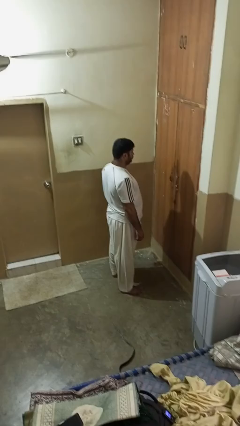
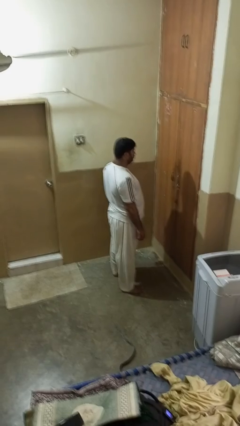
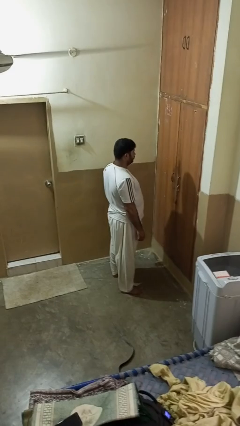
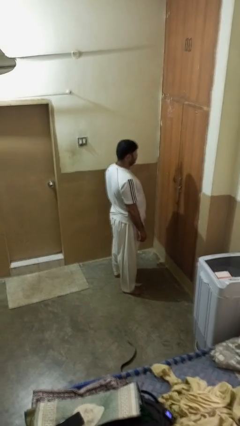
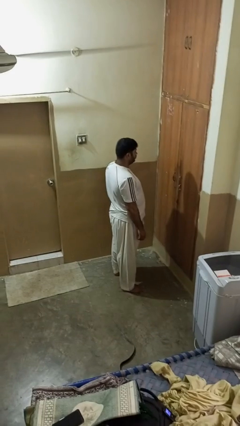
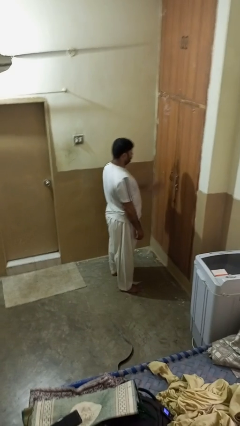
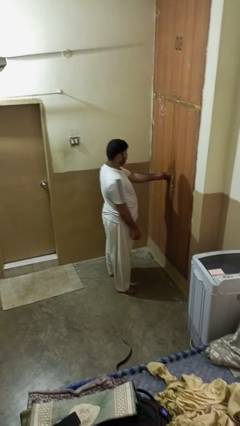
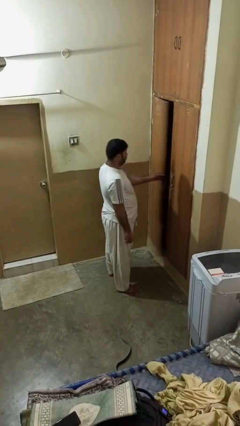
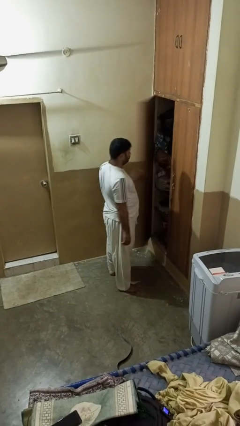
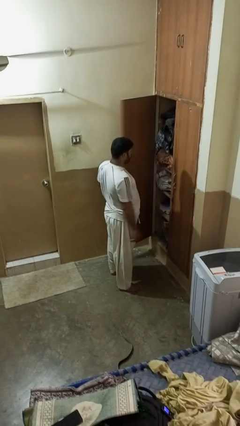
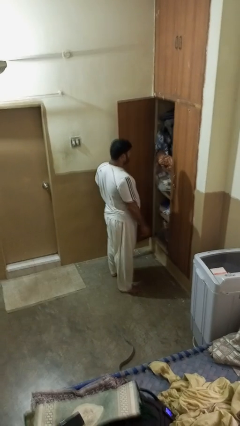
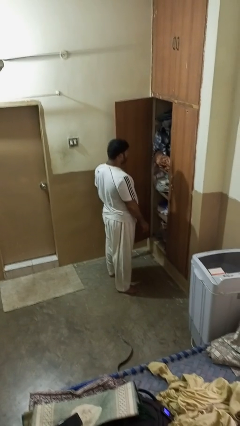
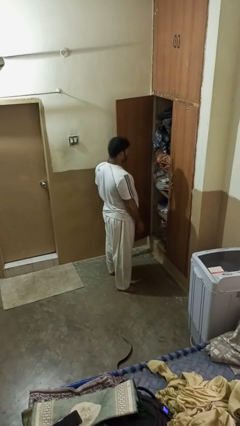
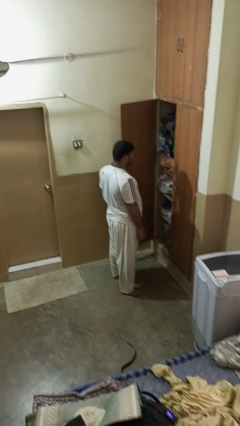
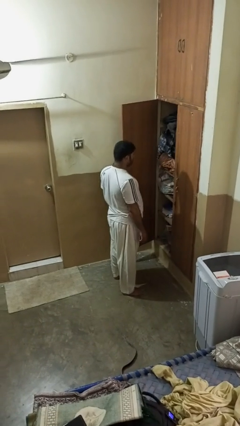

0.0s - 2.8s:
person opens closet door

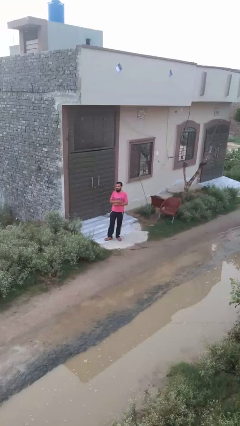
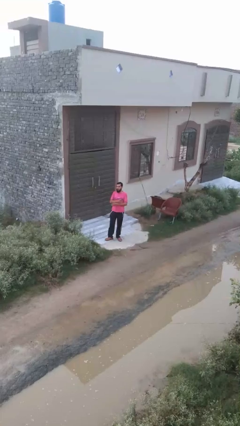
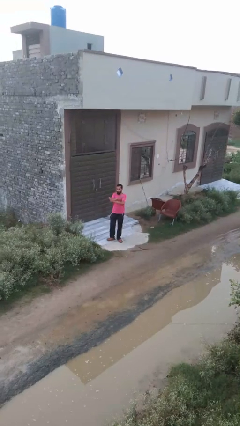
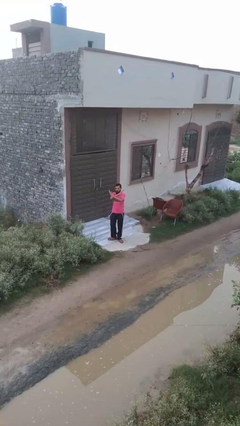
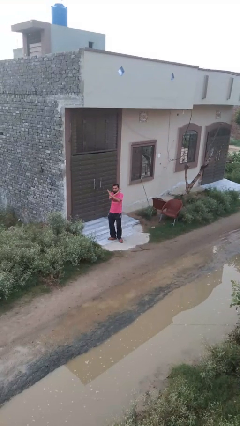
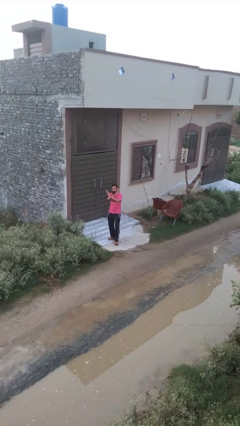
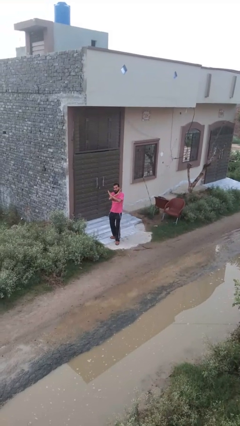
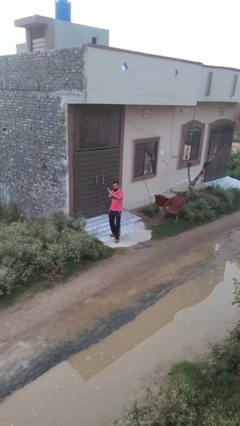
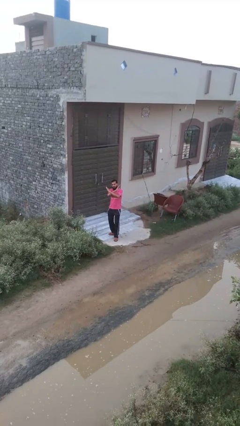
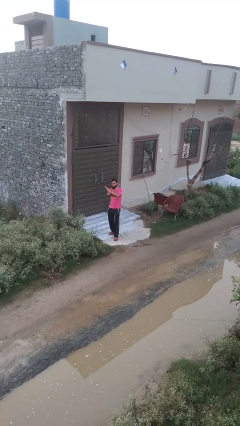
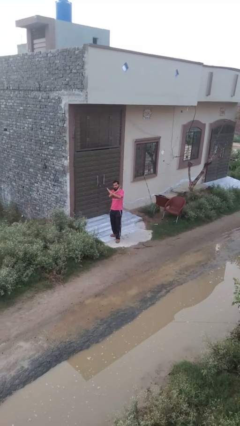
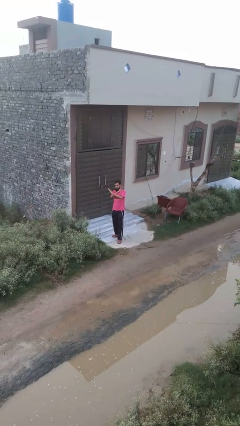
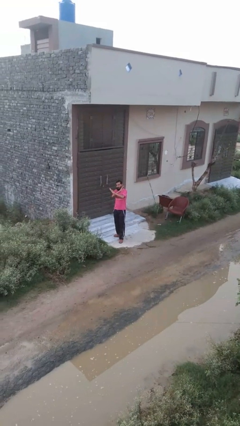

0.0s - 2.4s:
person crosses arms

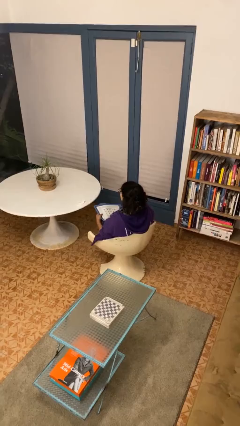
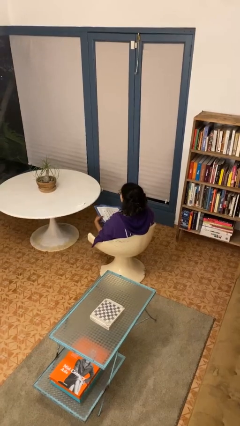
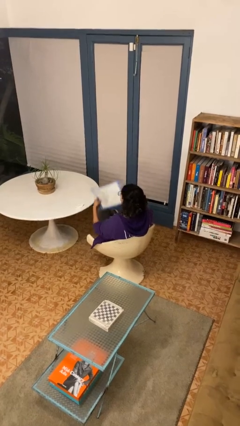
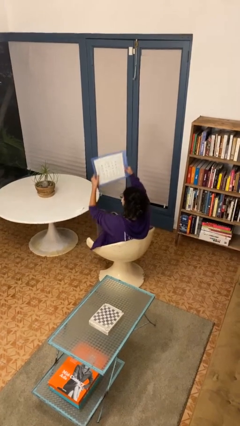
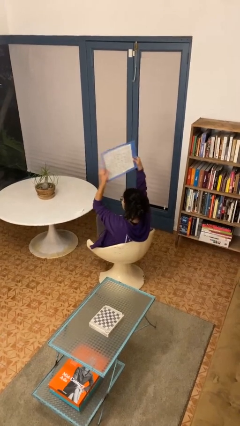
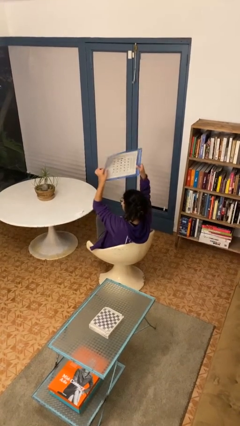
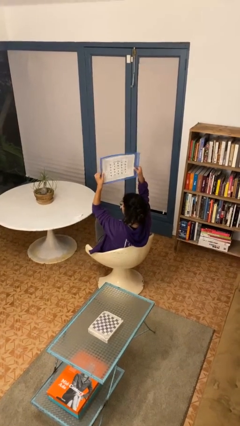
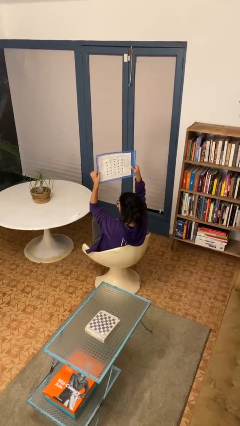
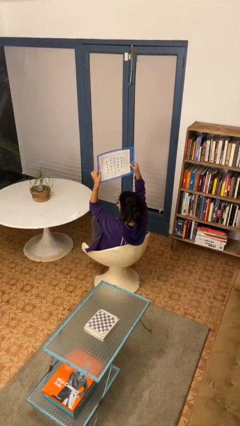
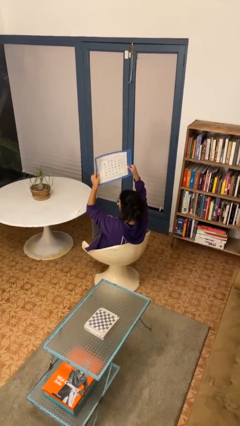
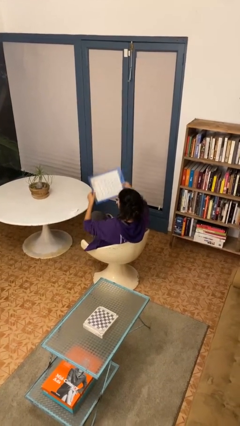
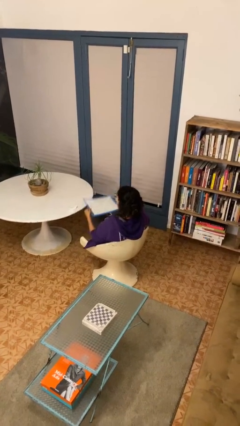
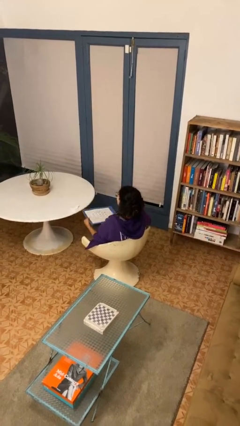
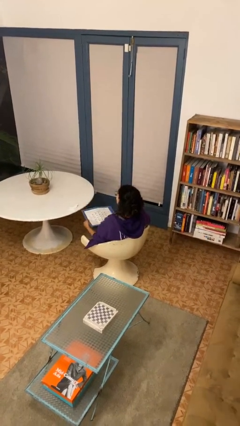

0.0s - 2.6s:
person holds object above head

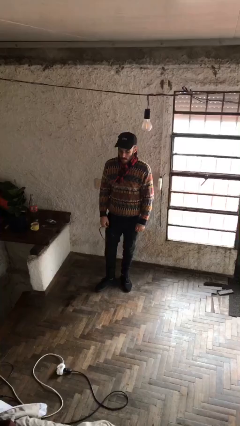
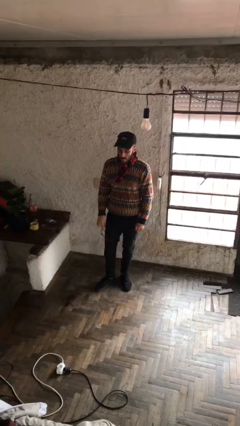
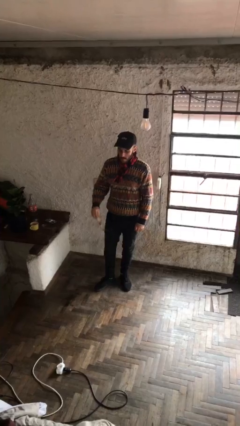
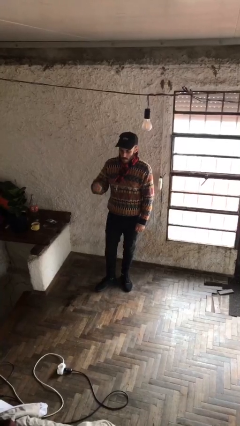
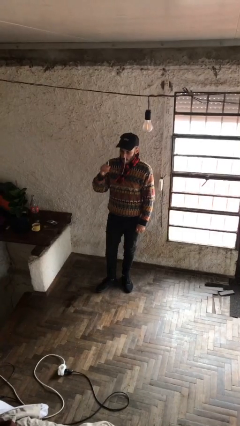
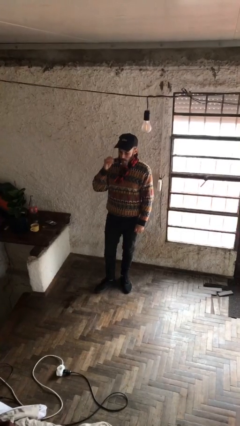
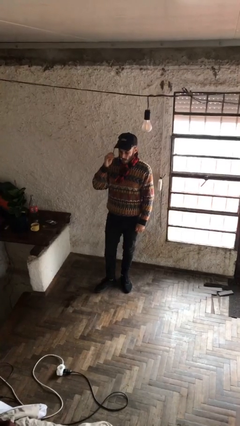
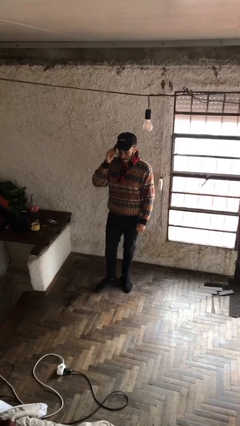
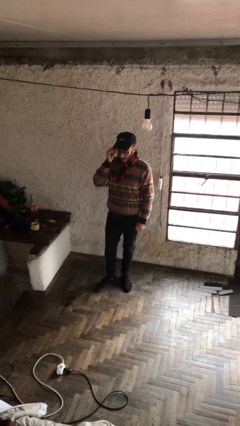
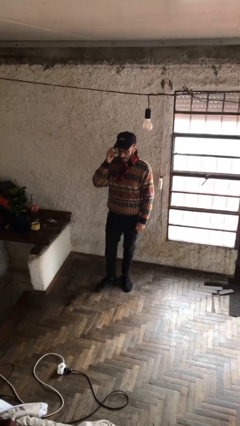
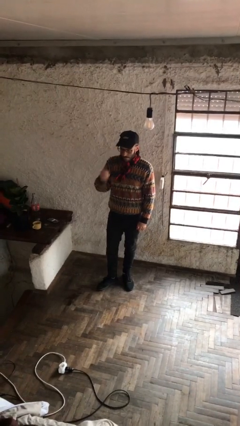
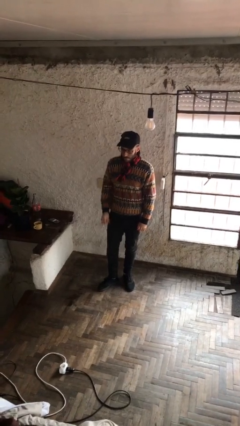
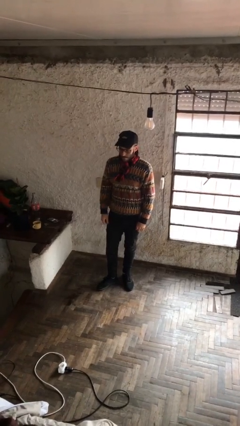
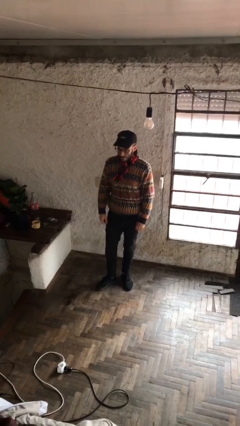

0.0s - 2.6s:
person puts on glasses

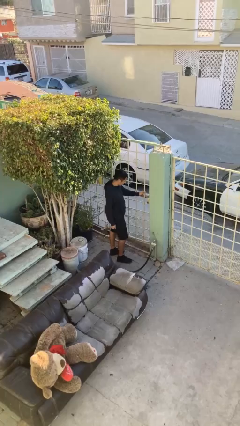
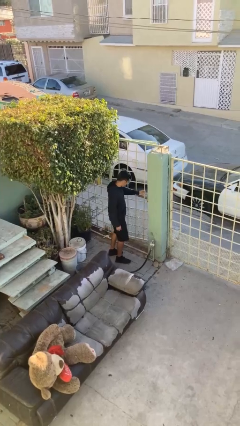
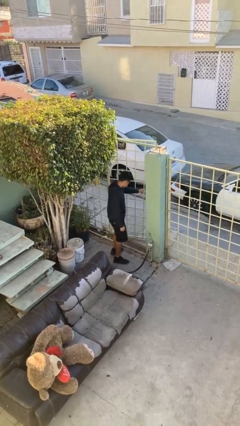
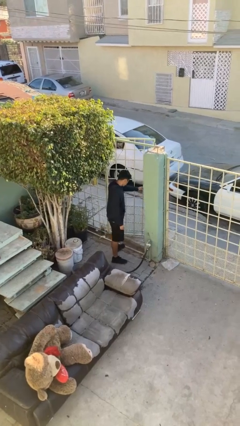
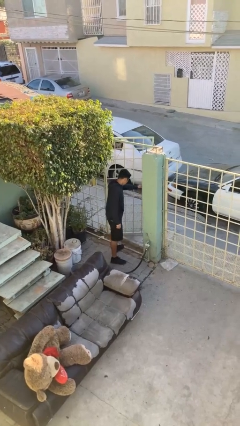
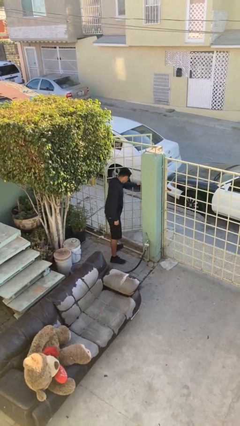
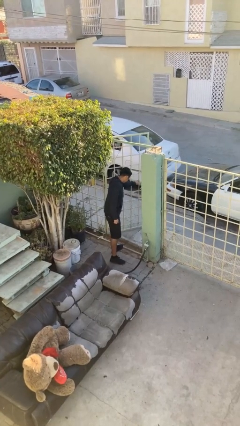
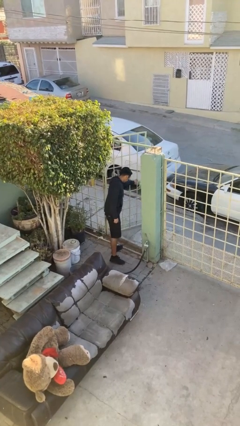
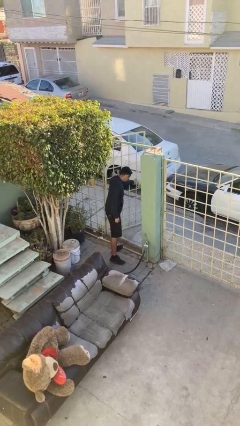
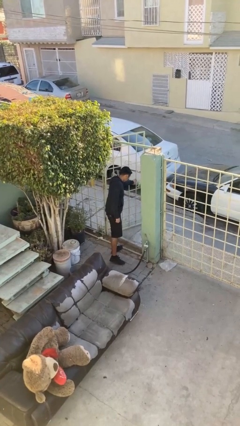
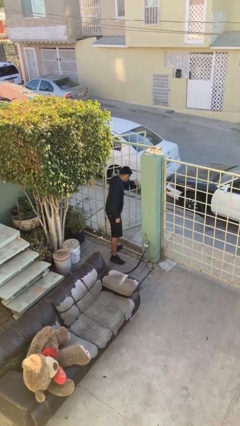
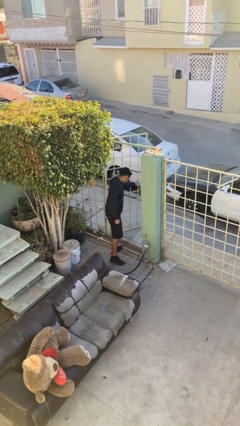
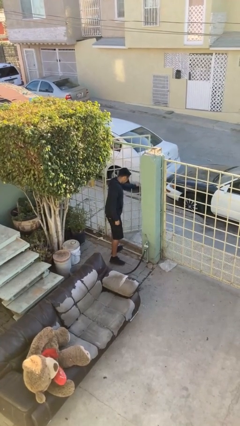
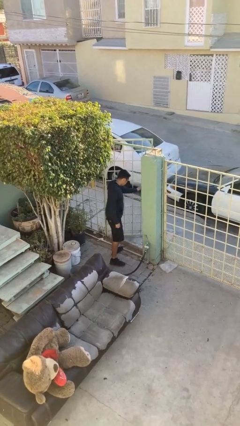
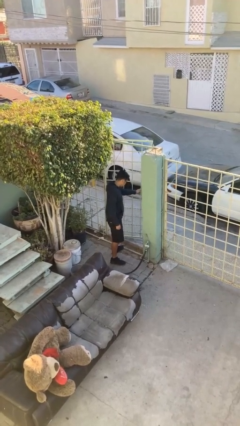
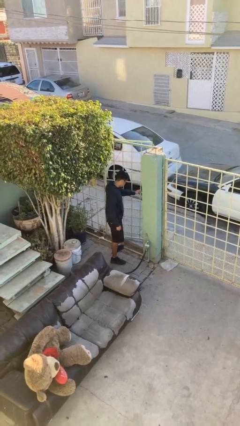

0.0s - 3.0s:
person opens facility door

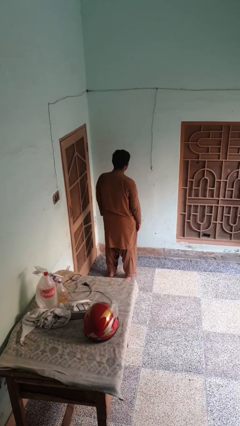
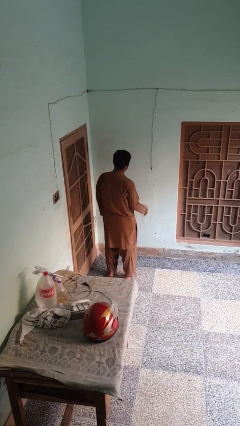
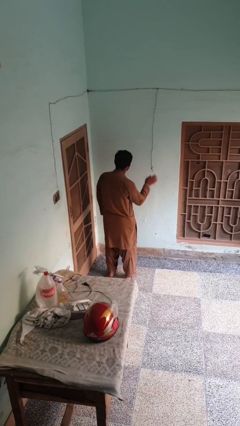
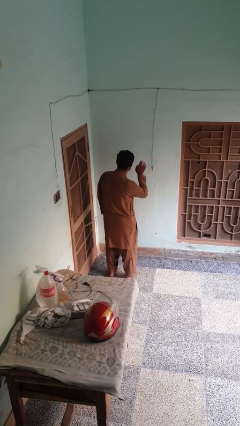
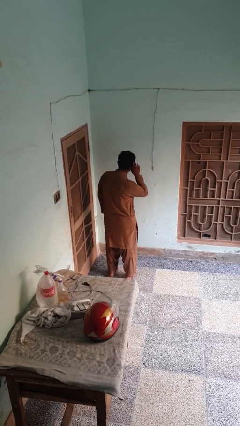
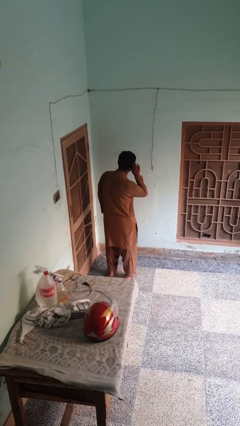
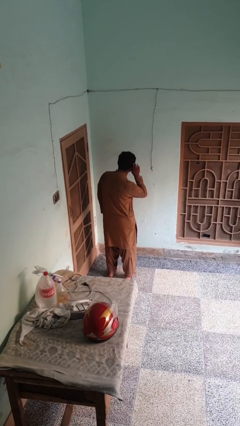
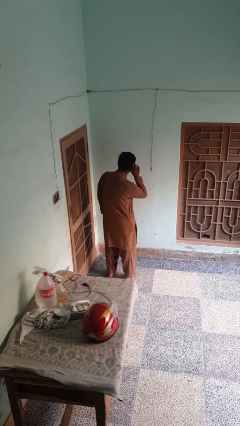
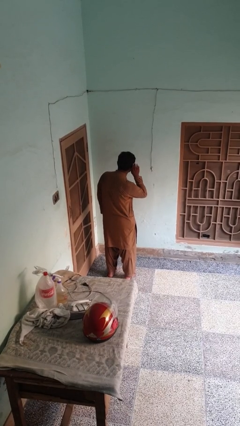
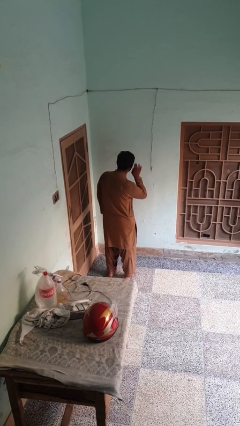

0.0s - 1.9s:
person gestures listen closely

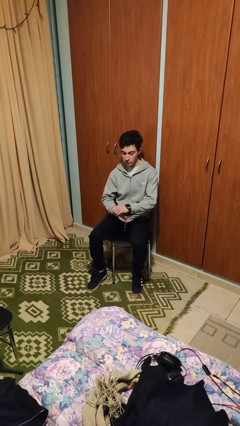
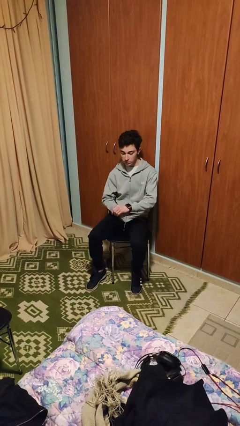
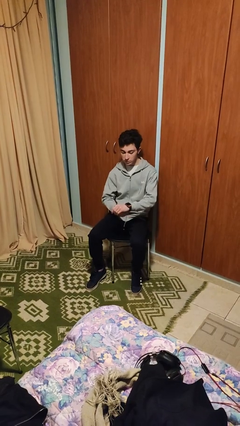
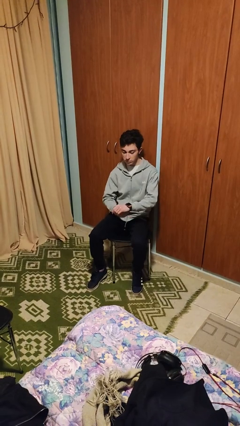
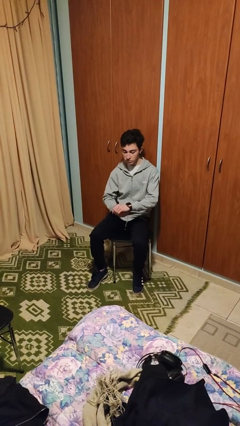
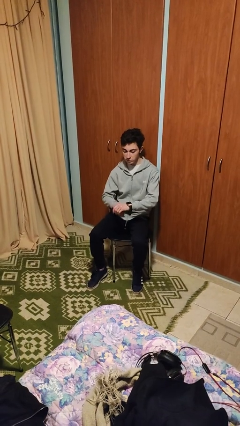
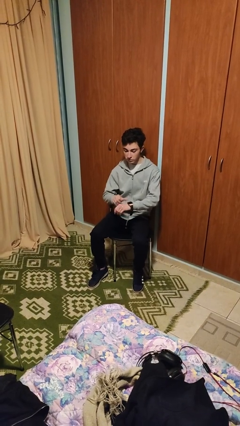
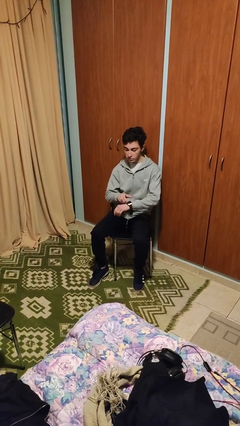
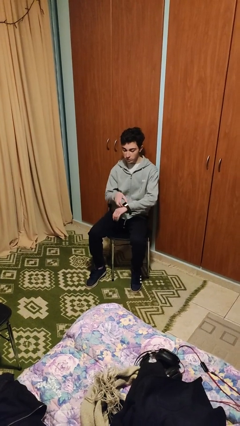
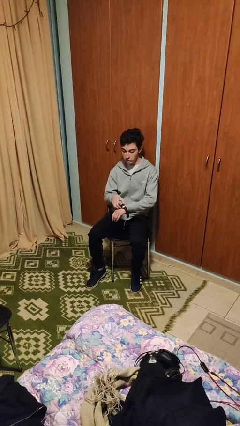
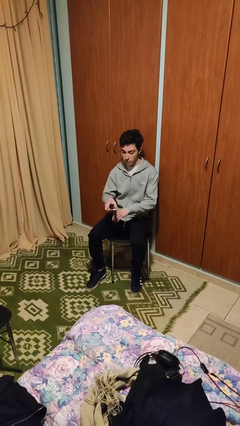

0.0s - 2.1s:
person takes off wristwatch
